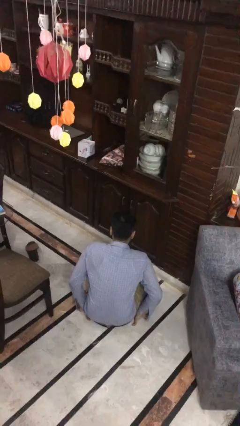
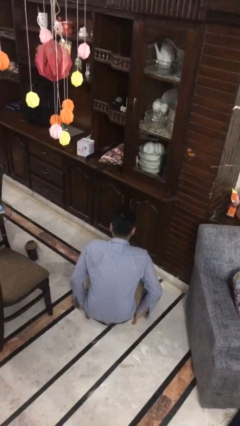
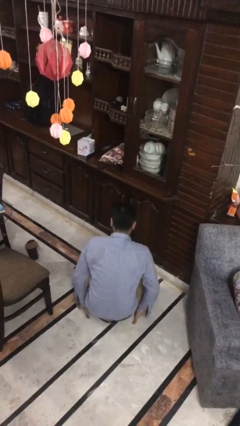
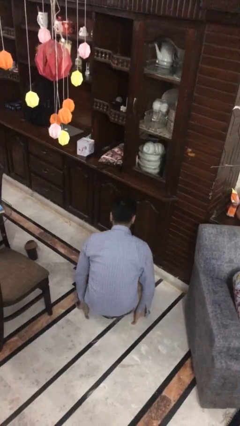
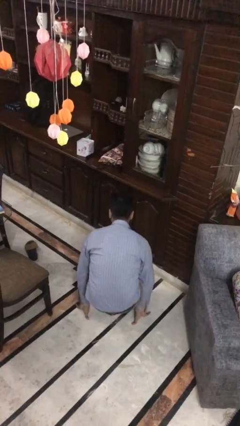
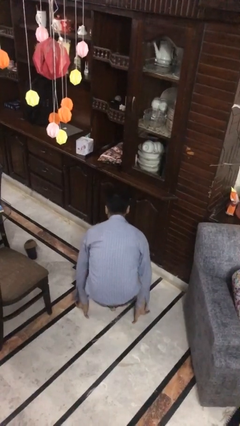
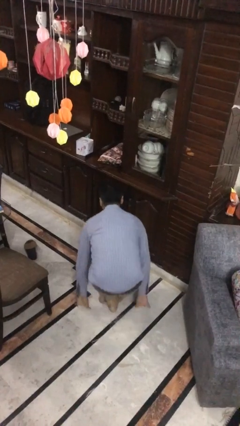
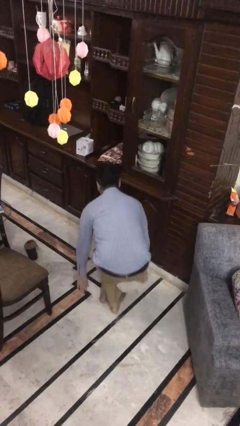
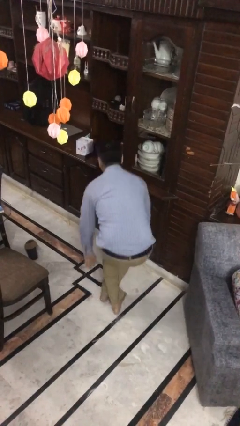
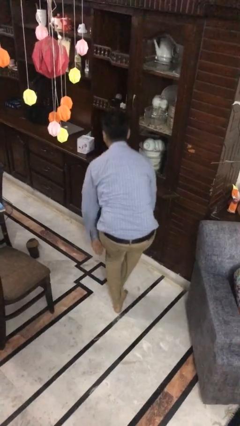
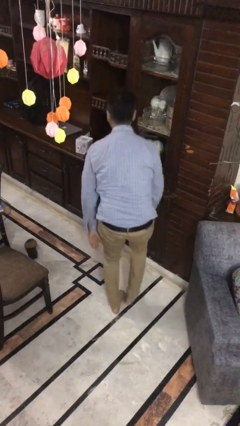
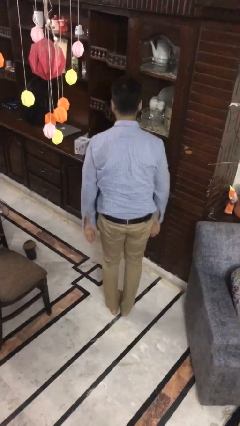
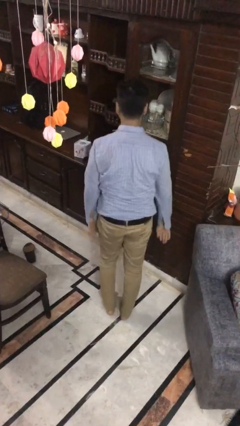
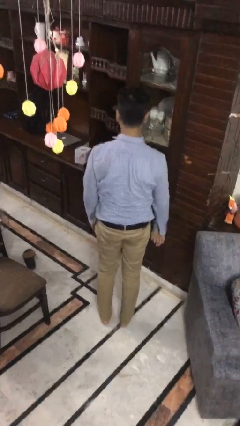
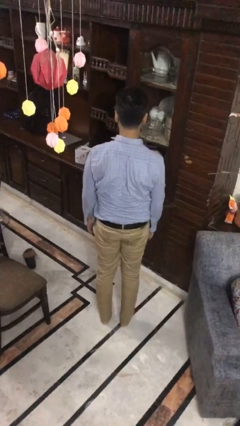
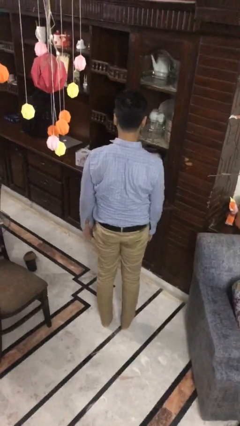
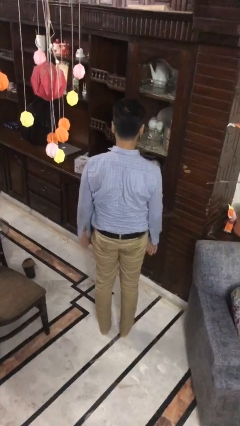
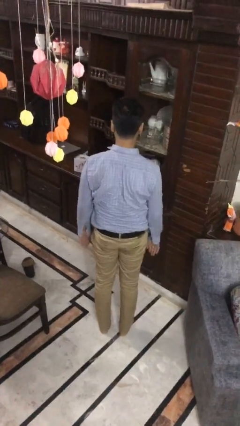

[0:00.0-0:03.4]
person stands up from floor

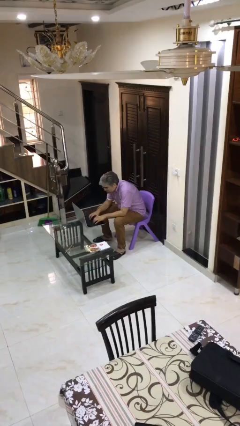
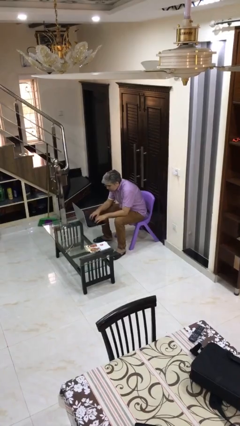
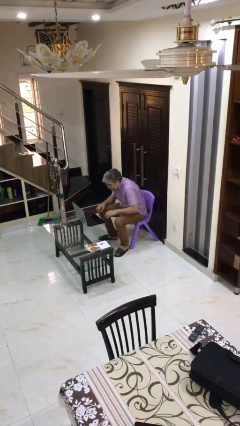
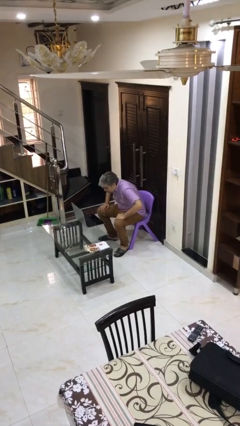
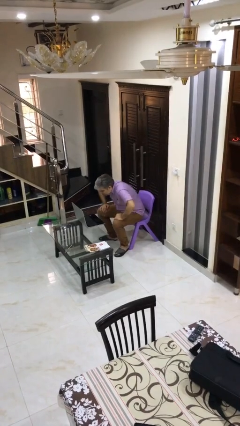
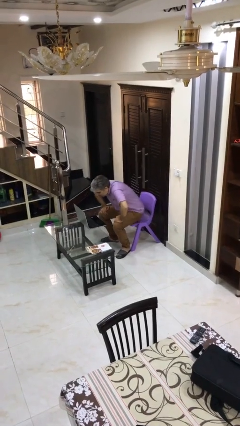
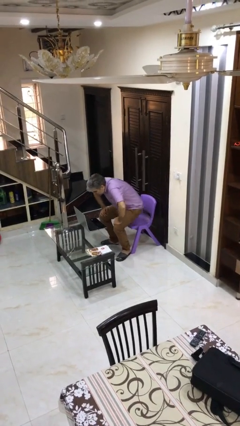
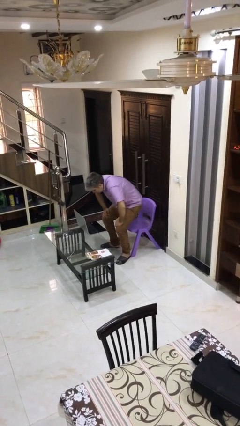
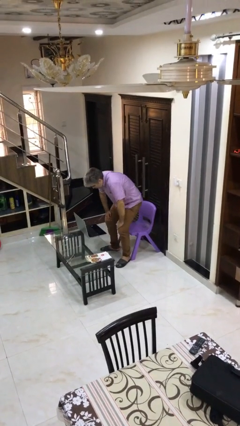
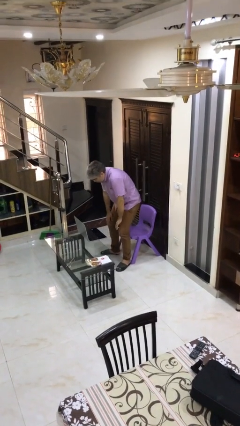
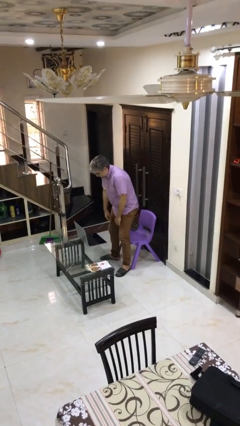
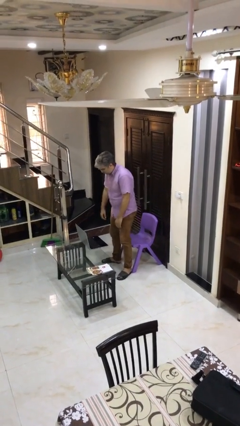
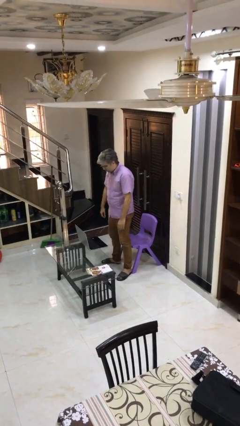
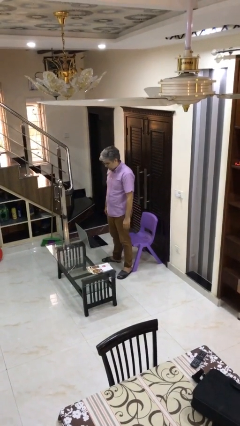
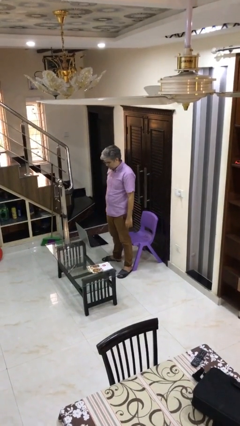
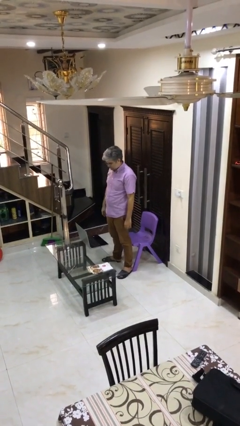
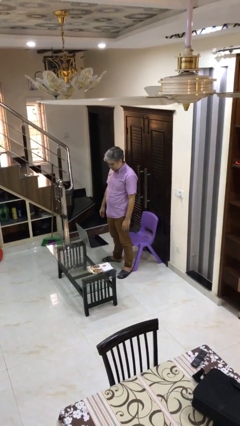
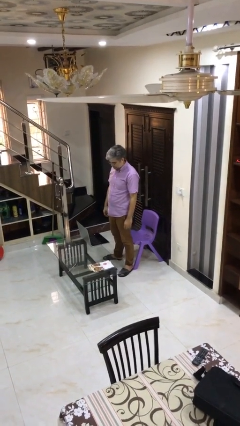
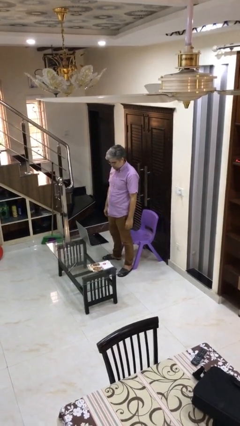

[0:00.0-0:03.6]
person stands up

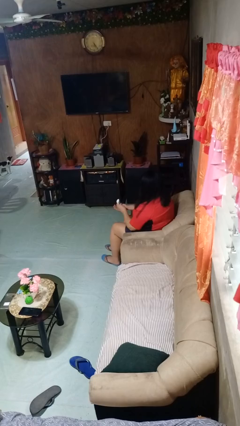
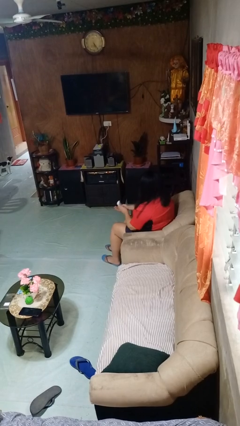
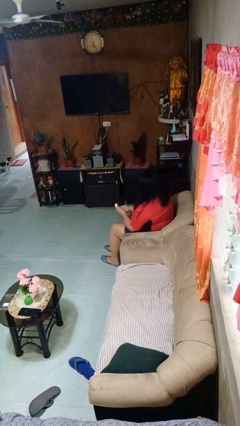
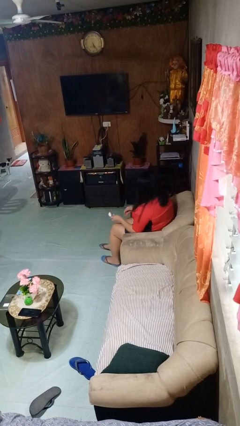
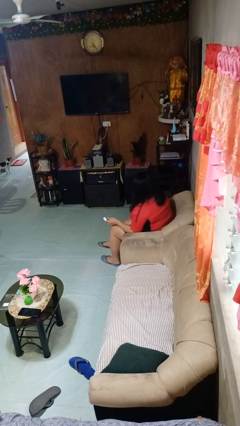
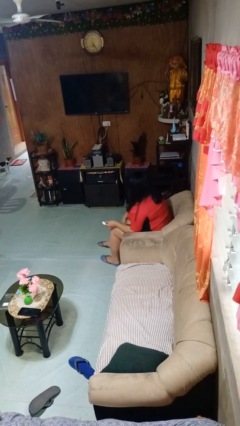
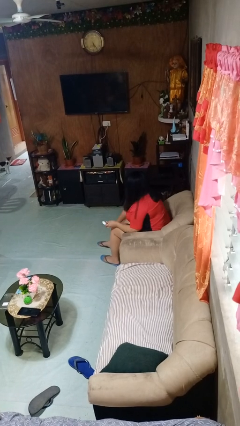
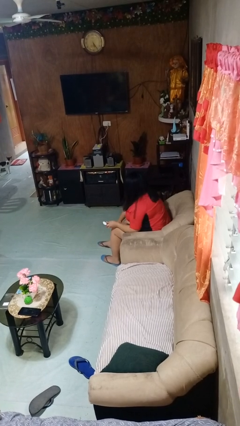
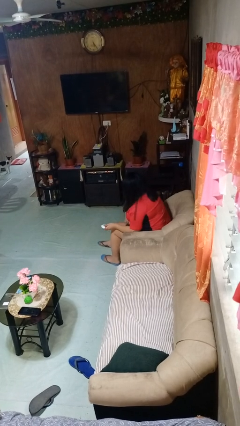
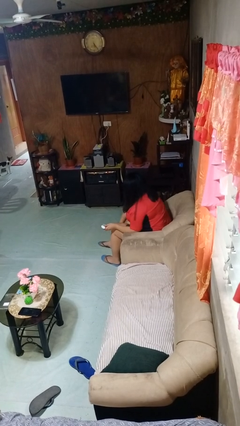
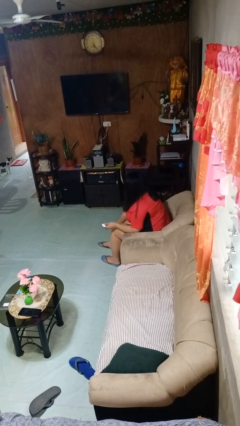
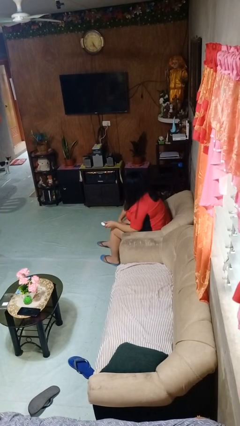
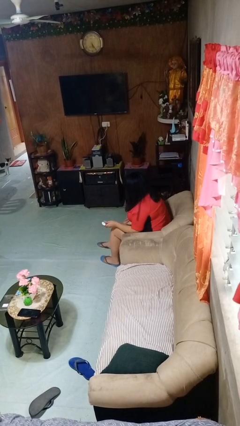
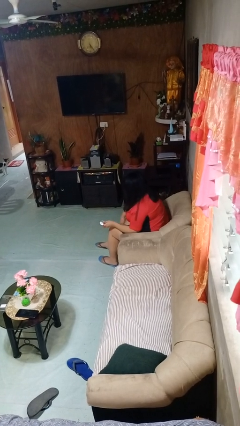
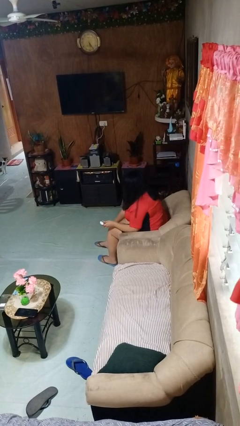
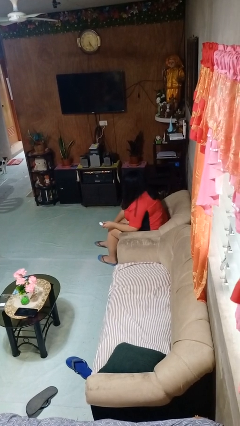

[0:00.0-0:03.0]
person applies sunscreen

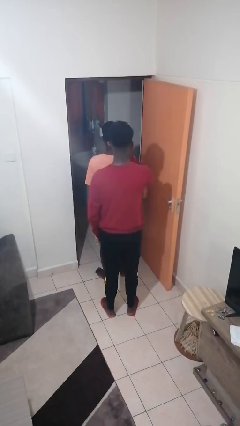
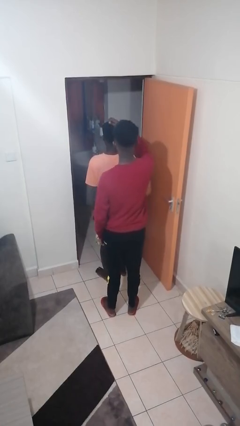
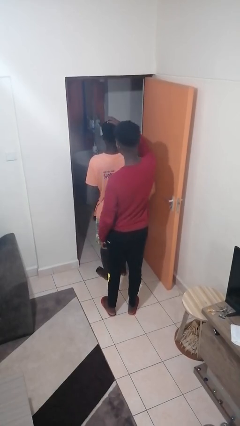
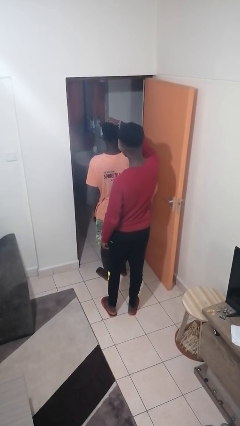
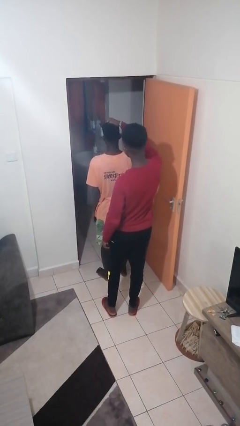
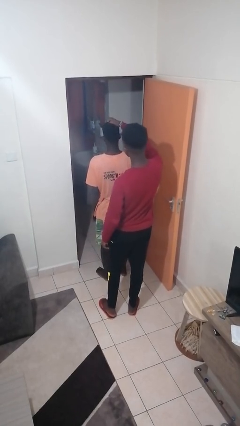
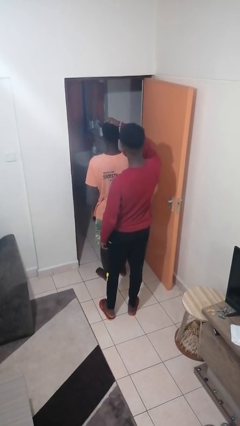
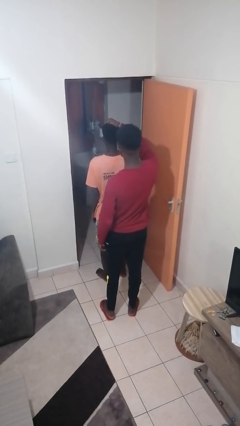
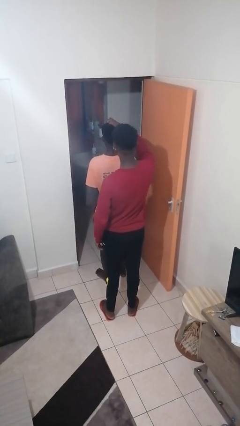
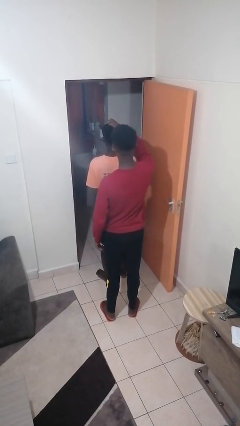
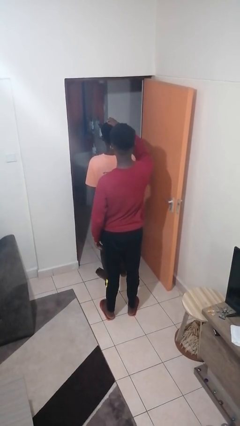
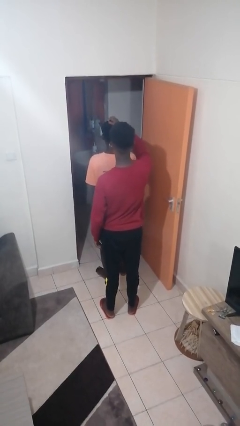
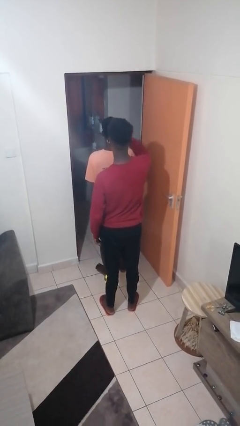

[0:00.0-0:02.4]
person grabs person by hair

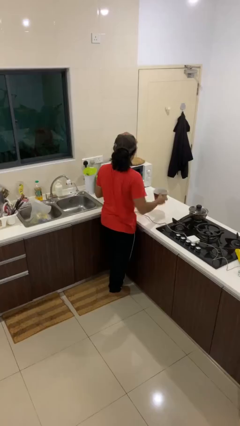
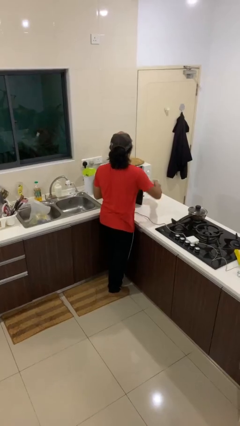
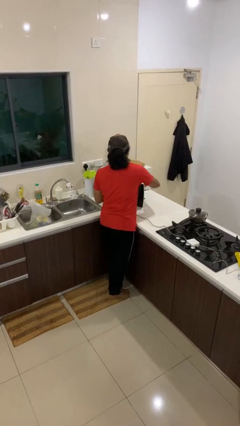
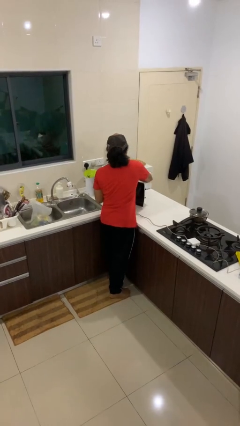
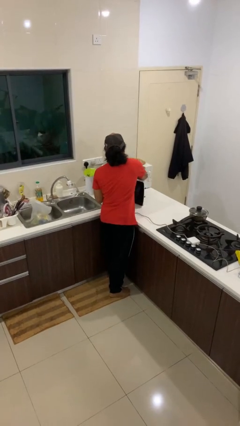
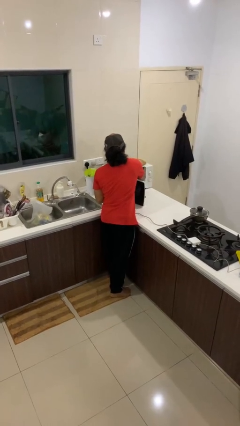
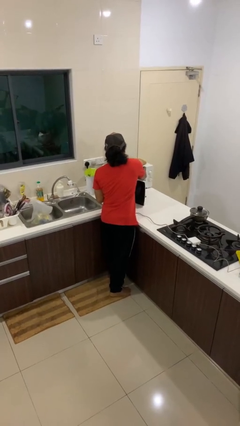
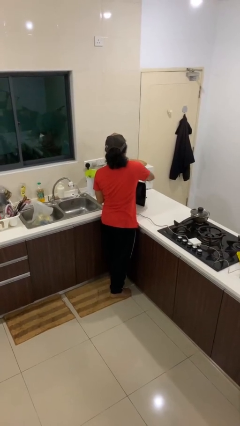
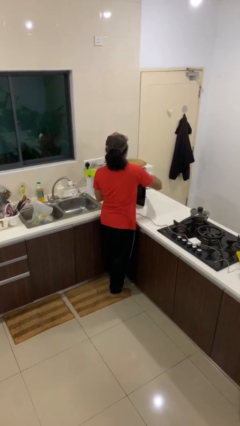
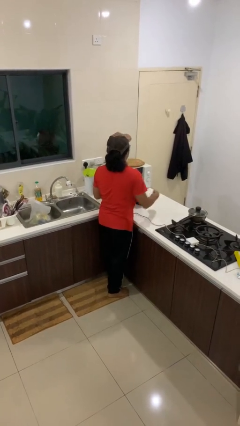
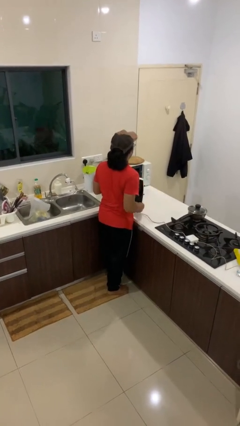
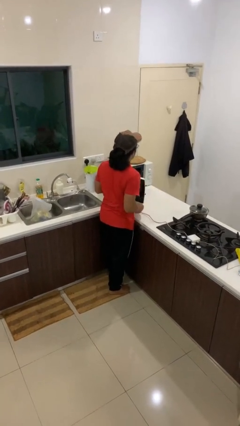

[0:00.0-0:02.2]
person puts object into microwave

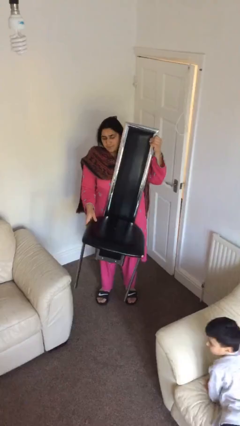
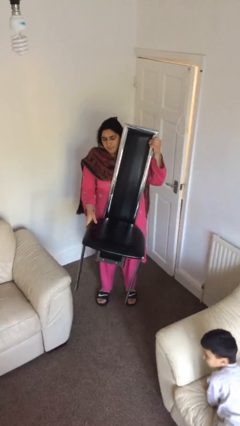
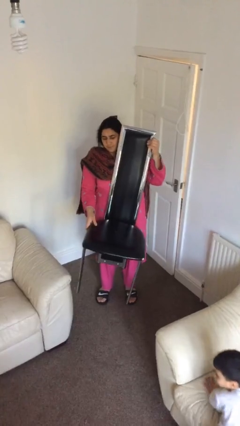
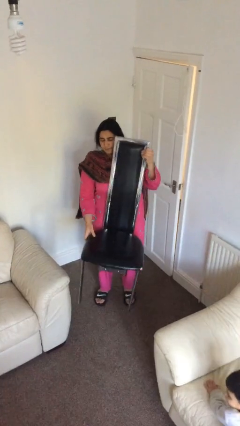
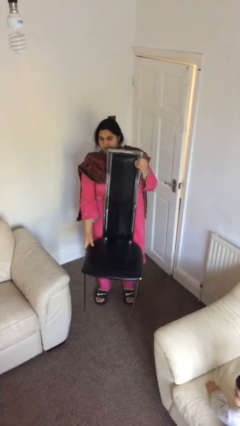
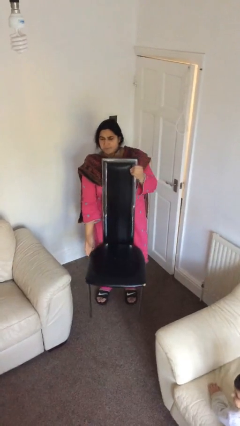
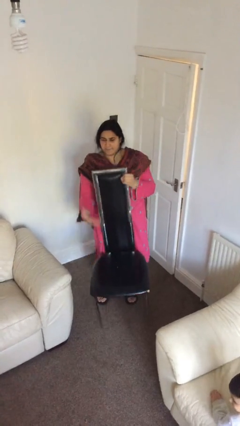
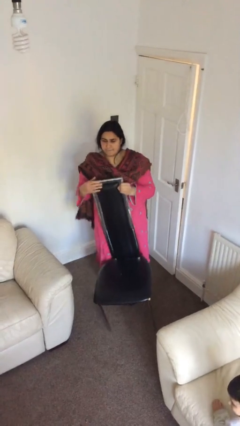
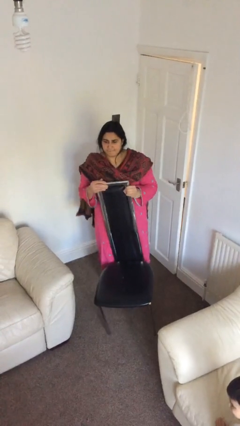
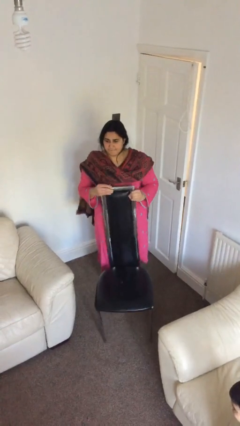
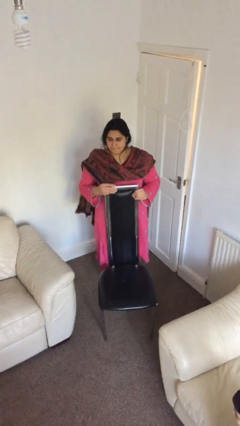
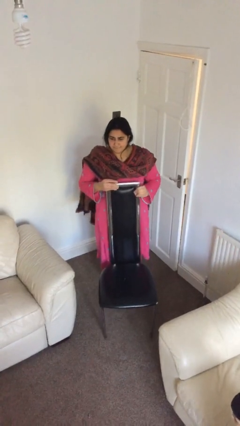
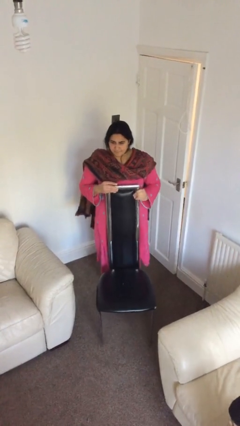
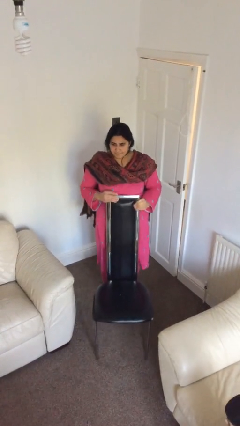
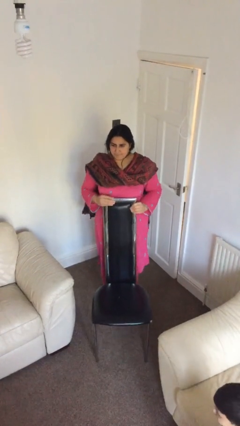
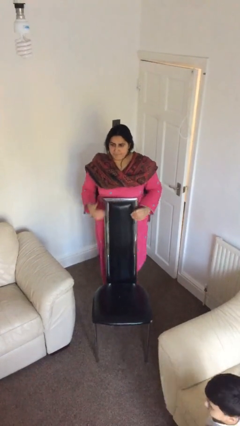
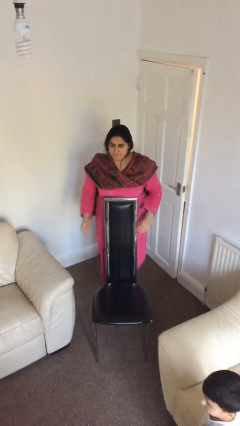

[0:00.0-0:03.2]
person puts down object on floor
